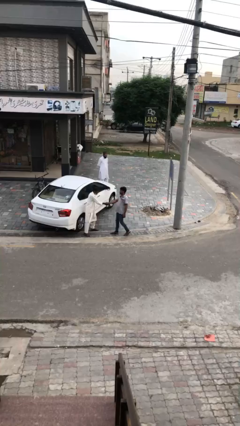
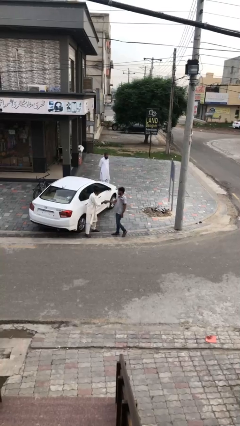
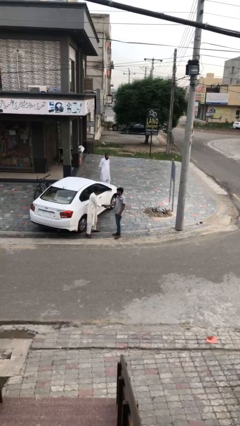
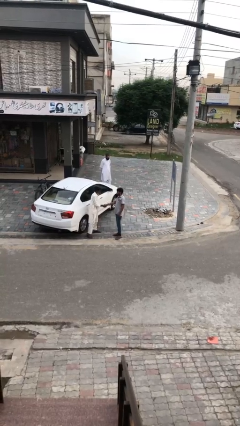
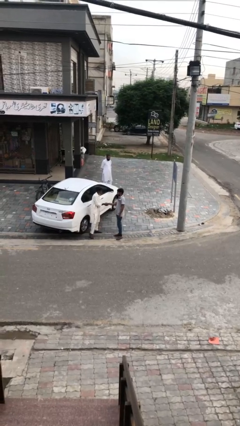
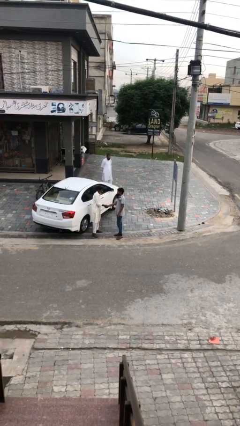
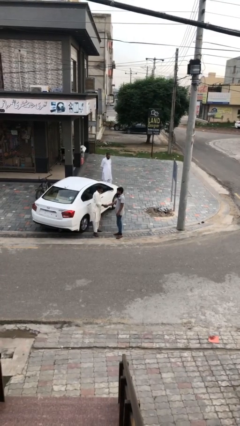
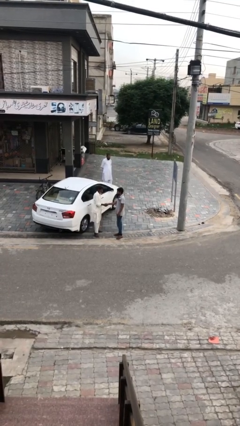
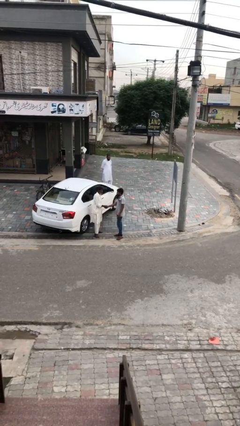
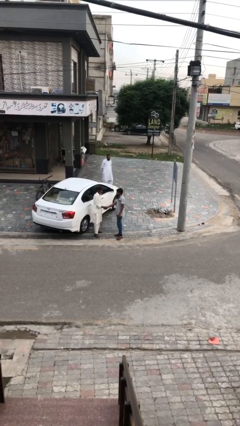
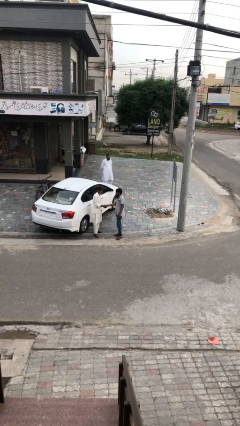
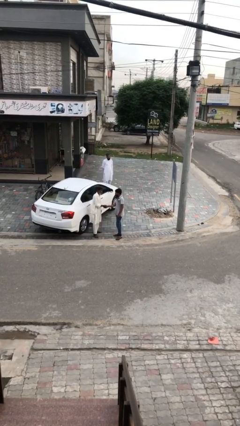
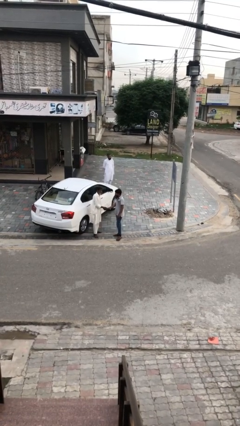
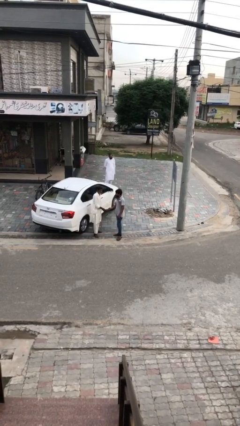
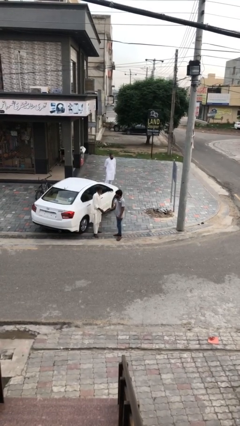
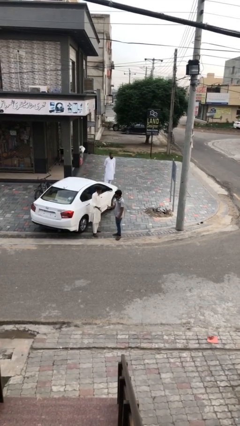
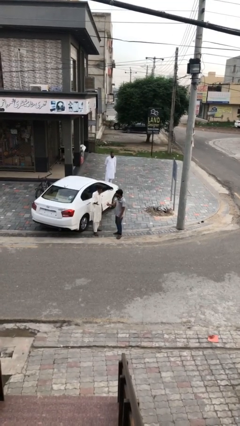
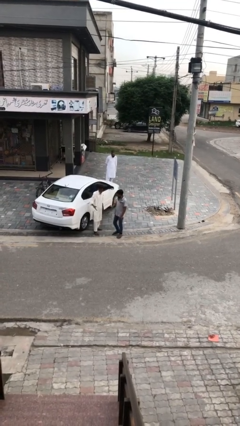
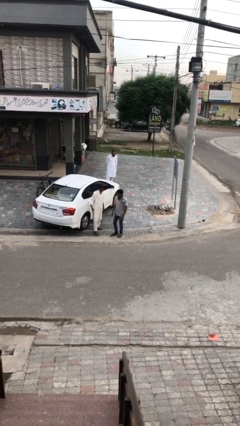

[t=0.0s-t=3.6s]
person shakes hand

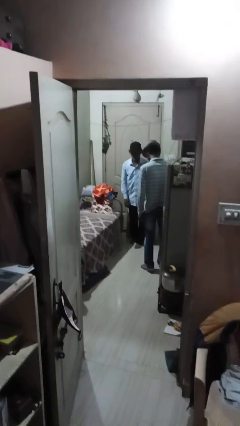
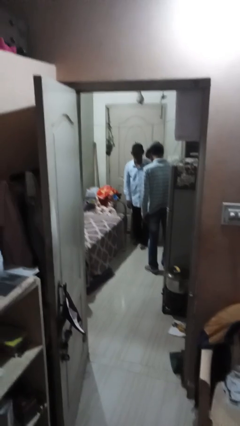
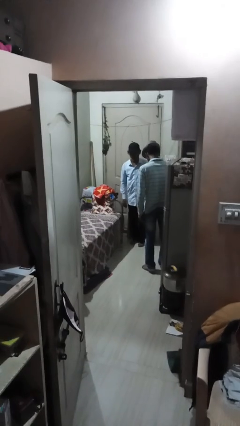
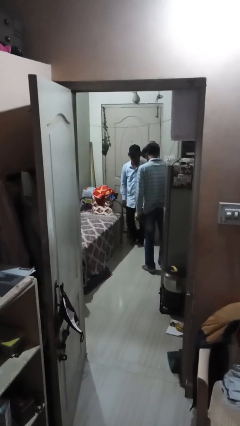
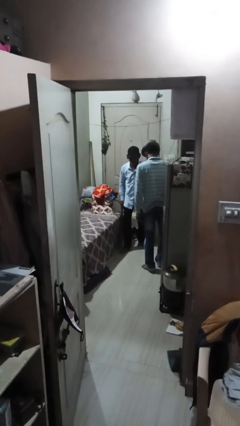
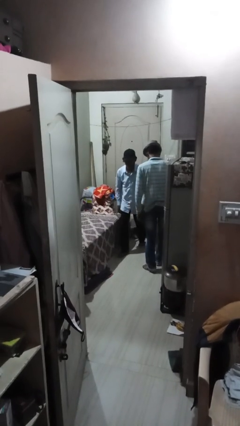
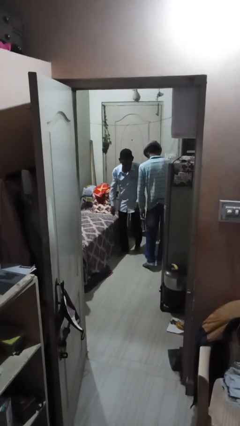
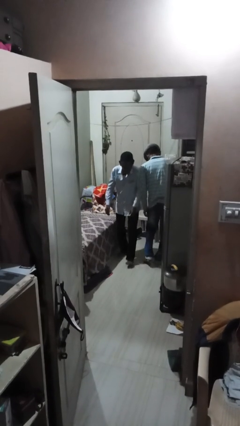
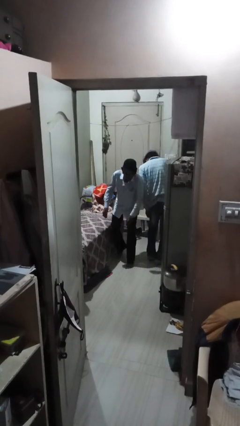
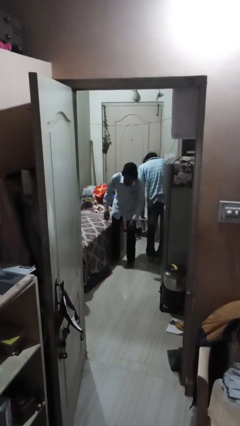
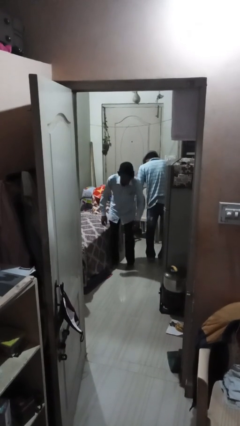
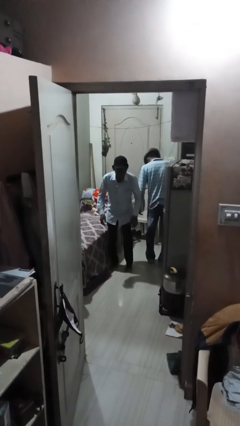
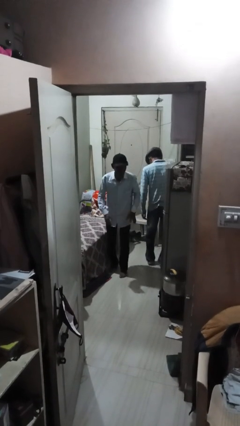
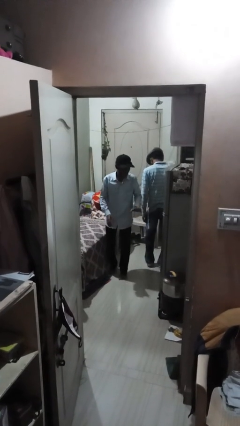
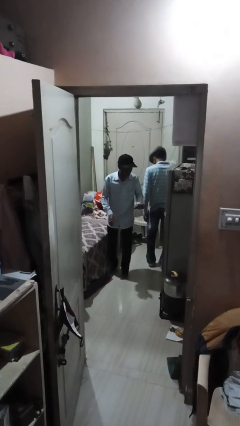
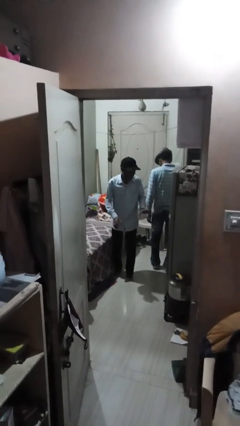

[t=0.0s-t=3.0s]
person bumps into person

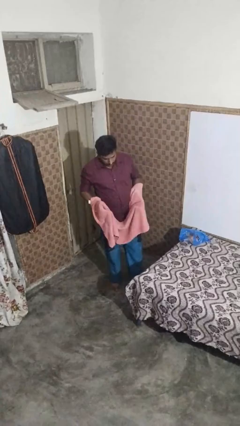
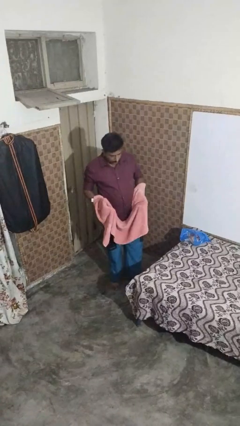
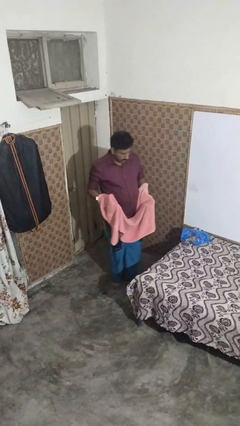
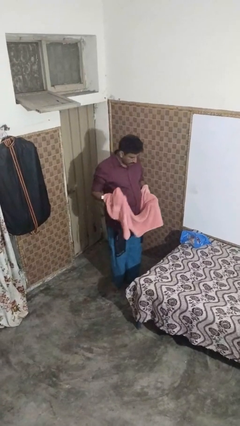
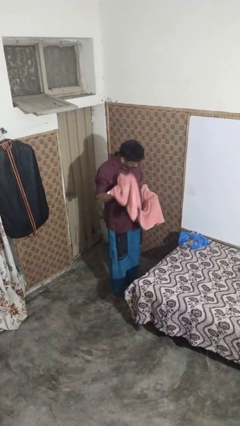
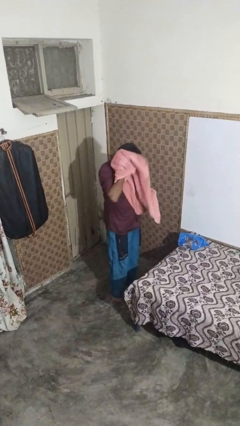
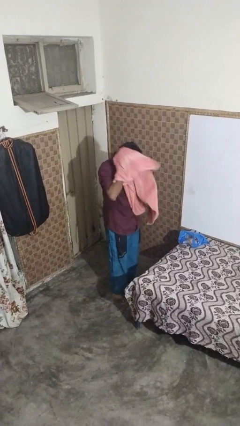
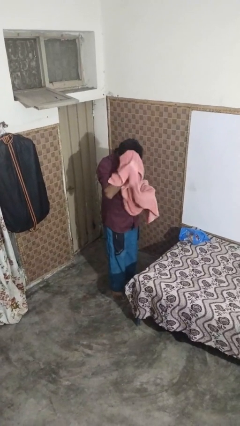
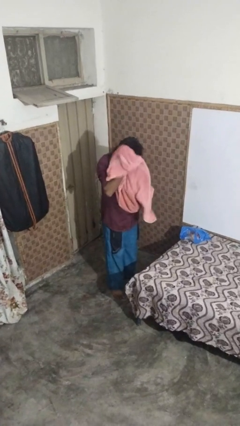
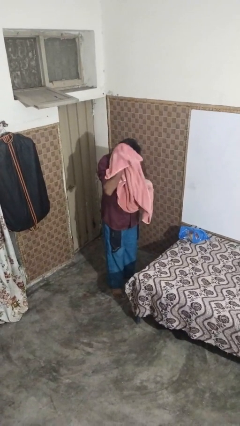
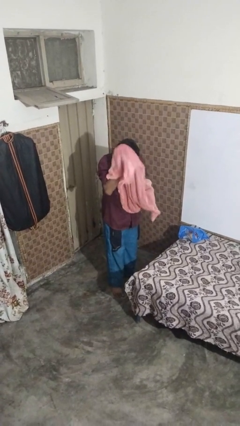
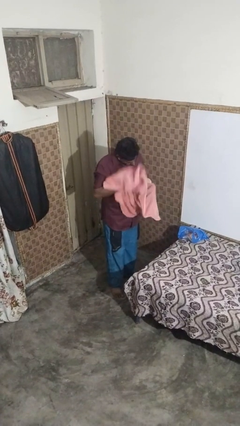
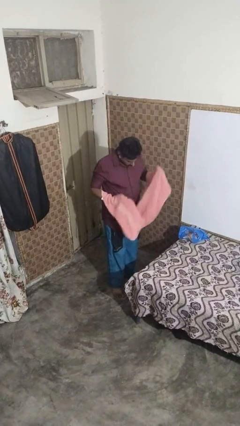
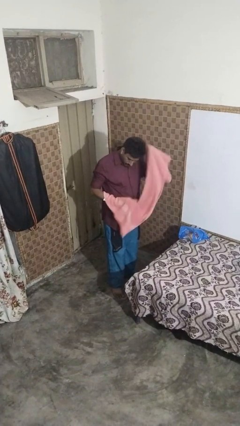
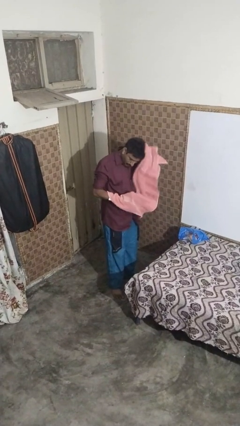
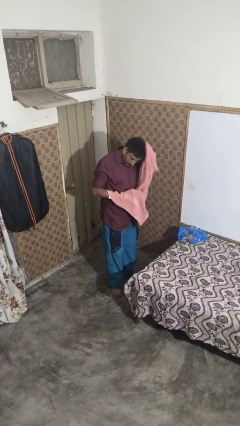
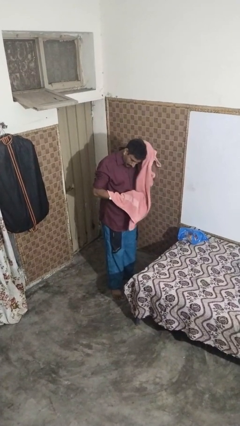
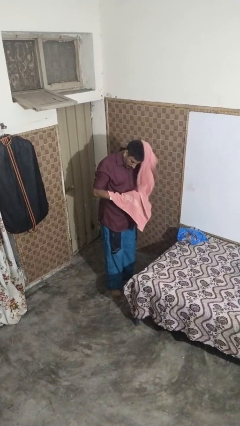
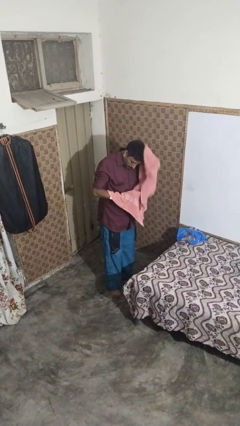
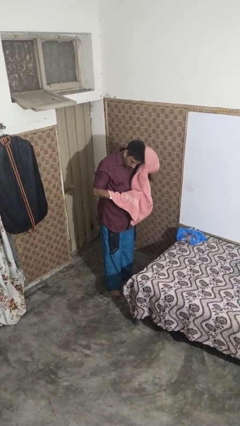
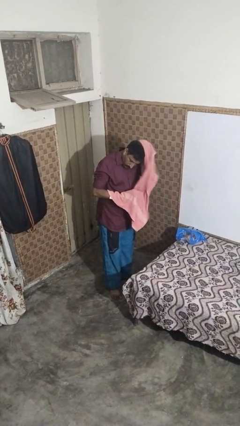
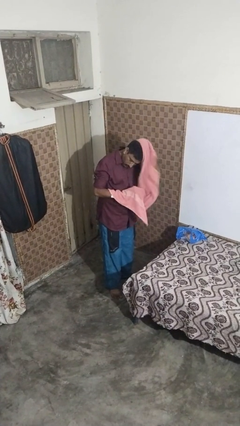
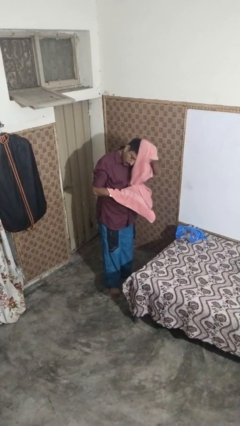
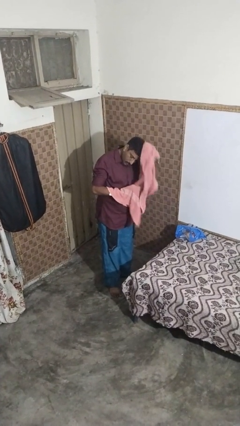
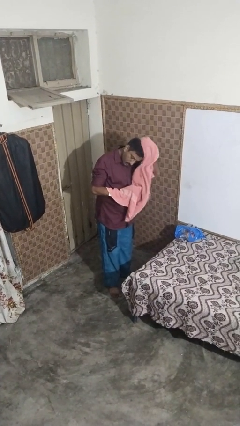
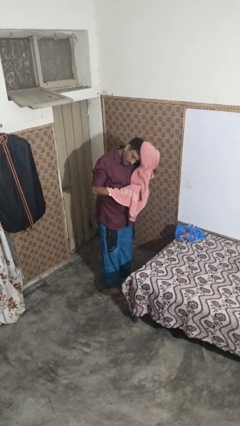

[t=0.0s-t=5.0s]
person dries hair with towel

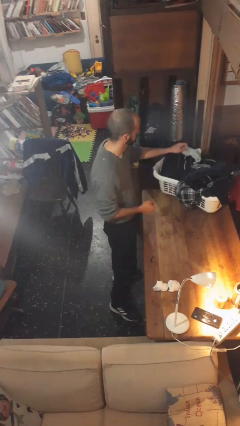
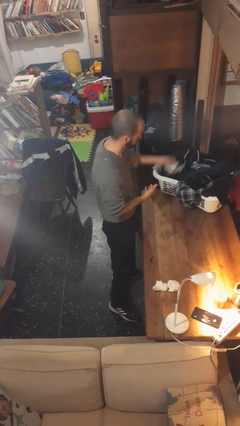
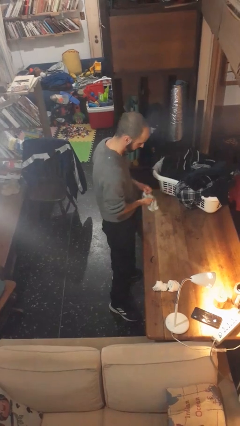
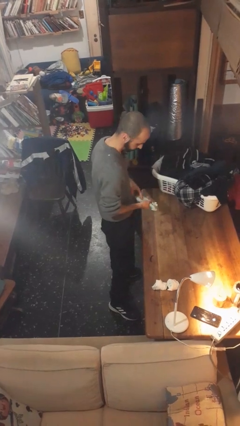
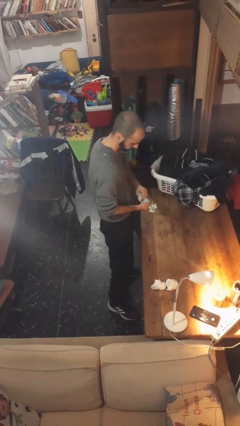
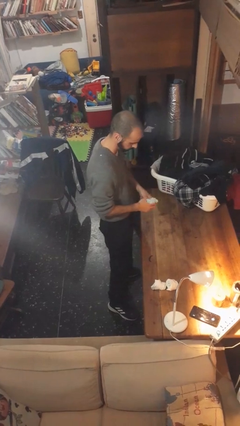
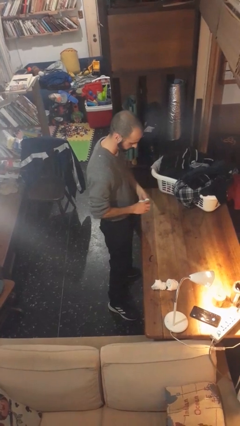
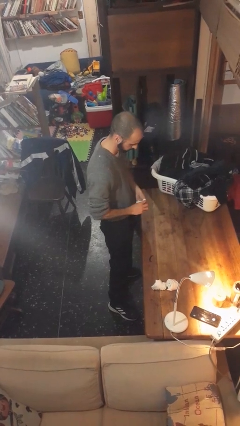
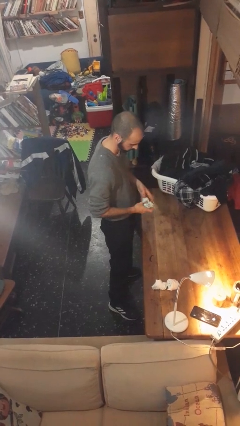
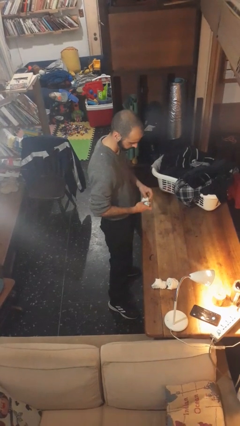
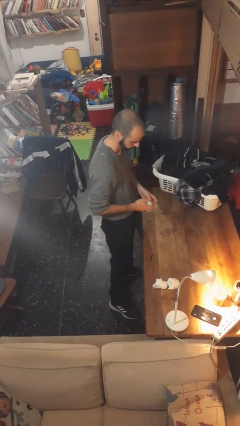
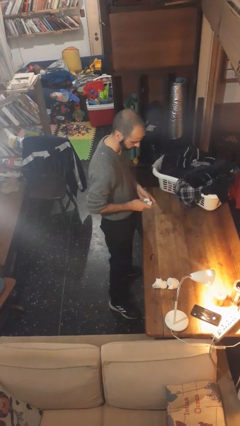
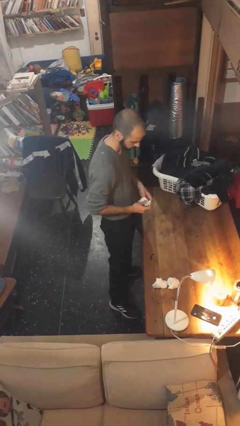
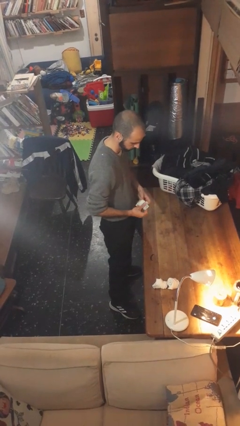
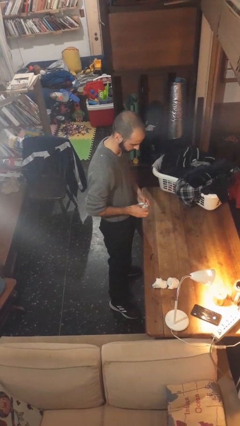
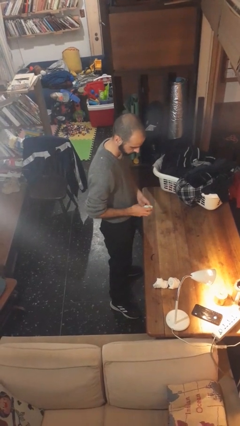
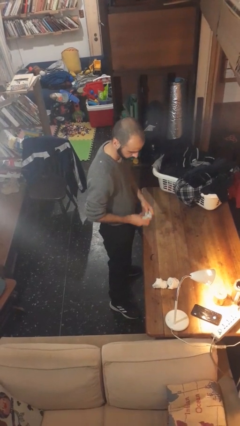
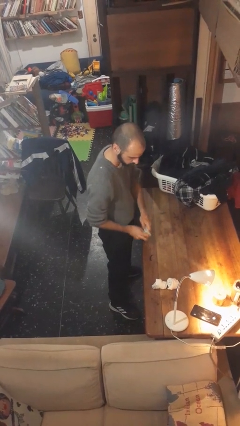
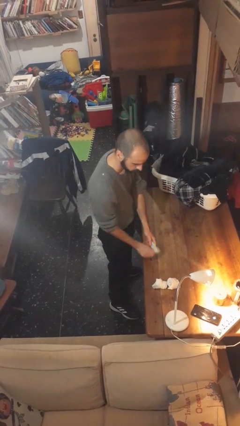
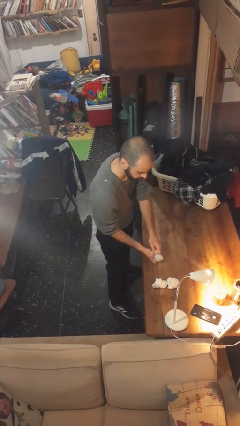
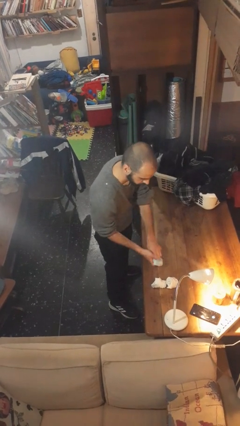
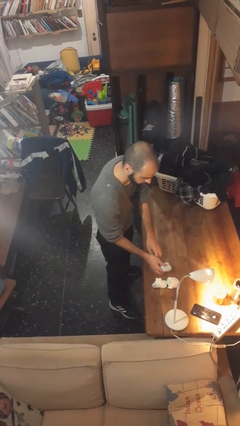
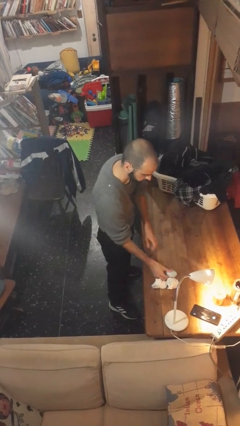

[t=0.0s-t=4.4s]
person folds socks

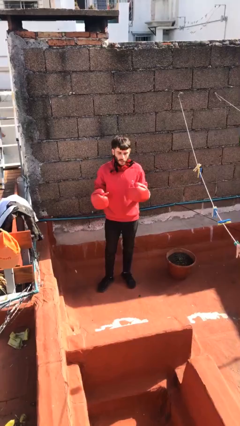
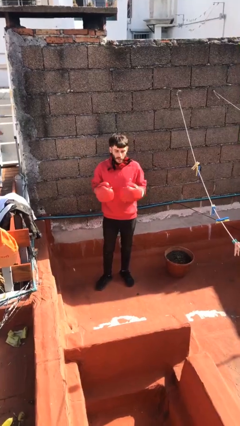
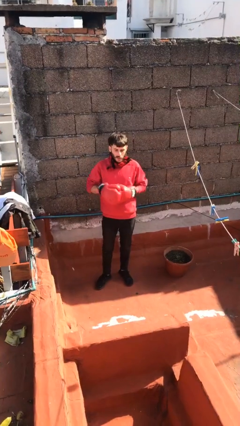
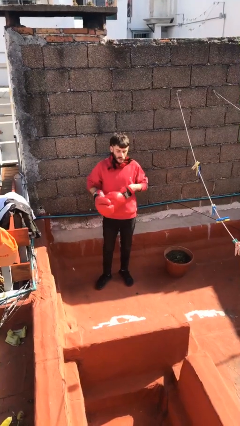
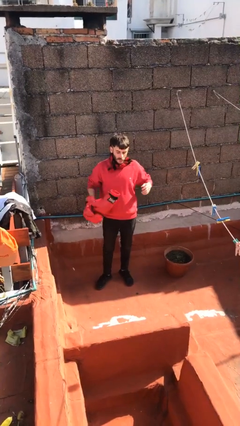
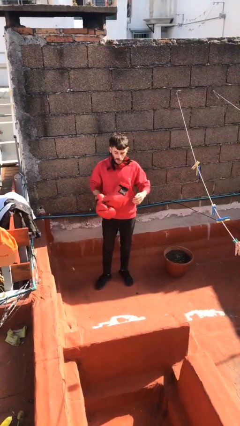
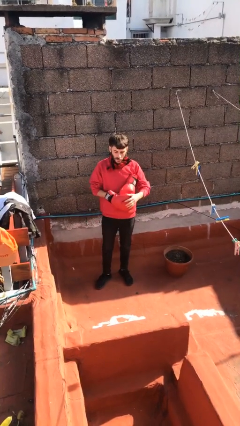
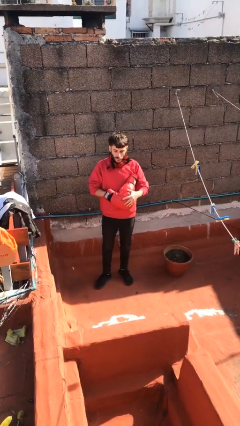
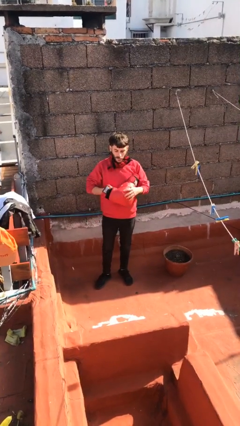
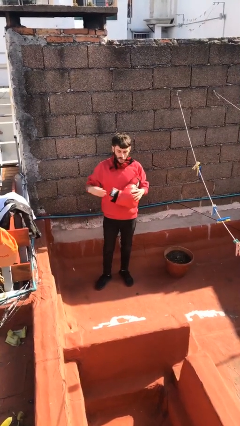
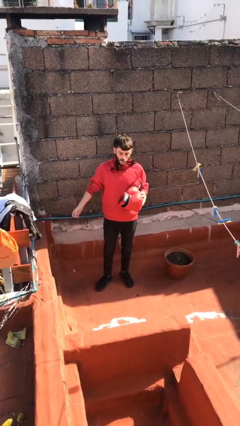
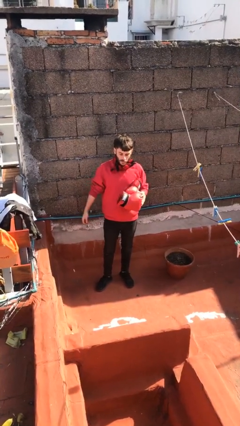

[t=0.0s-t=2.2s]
person takes off gloves
